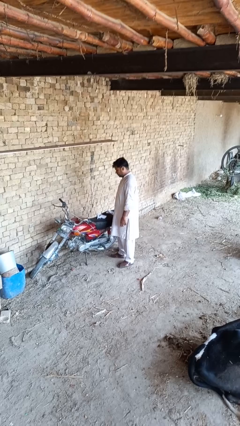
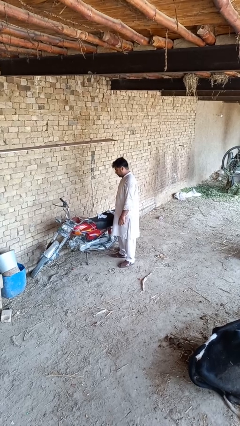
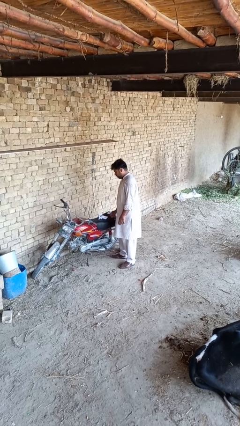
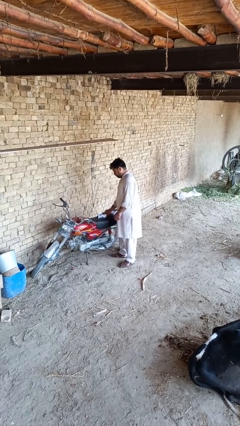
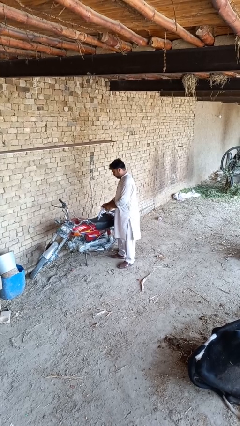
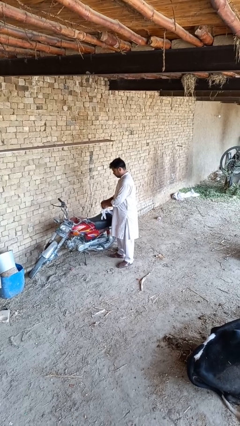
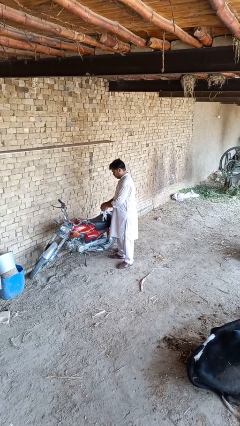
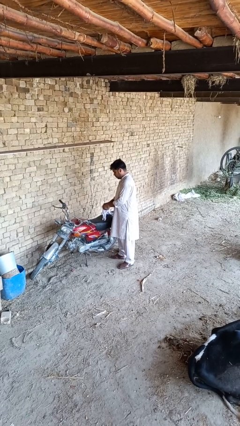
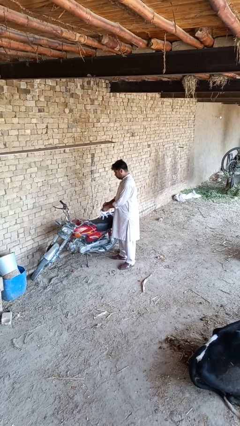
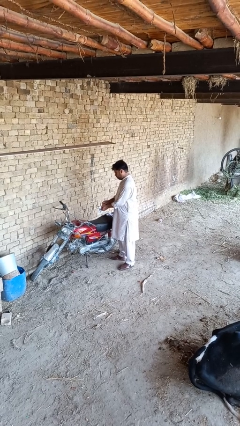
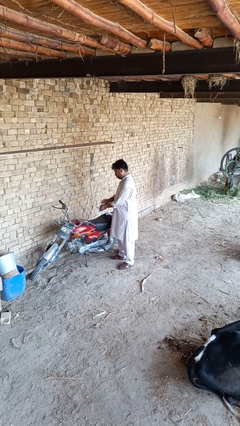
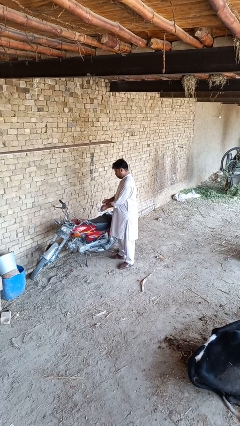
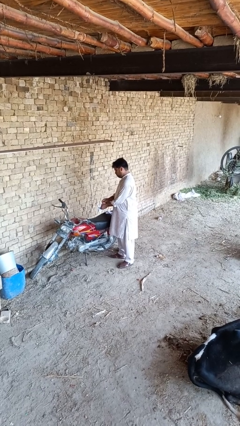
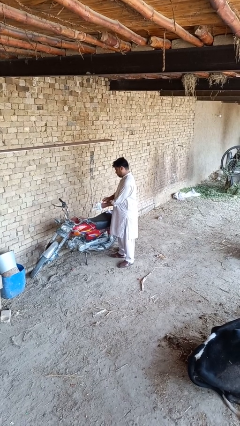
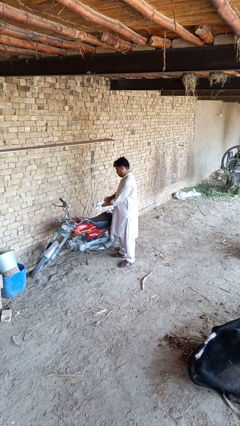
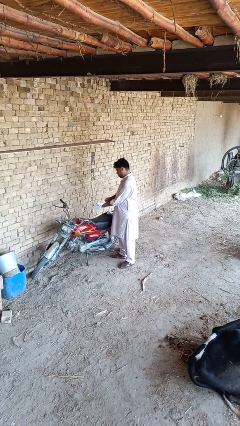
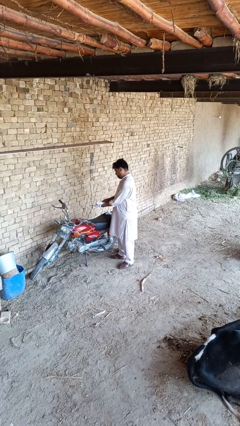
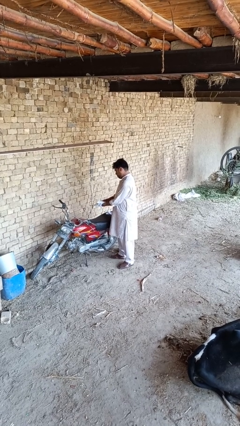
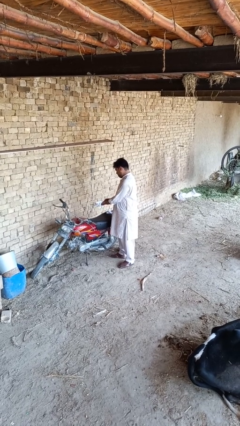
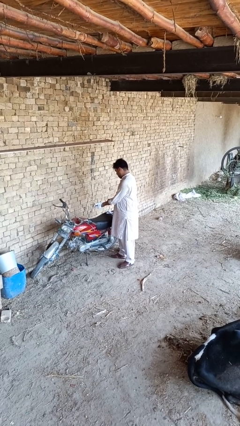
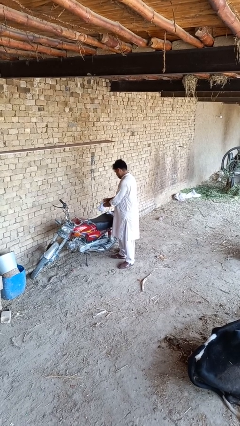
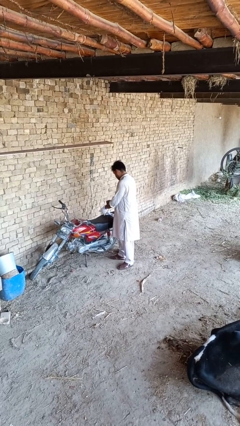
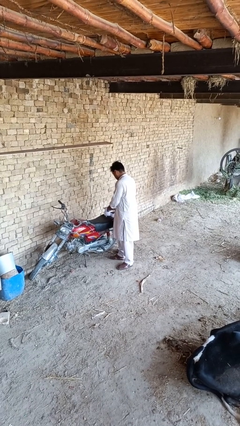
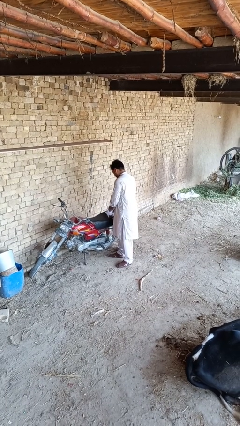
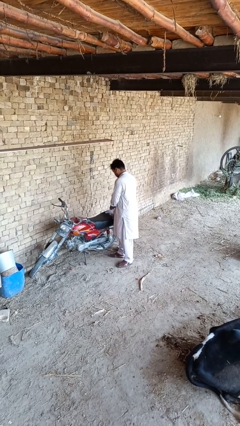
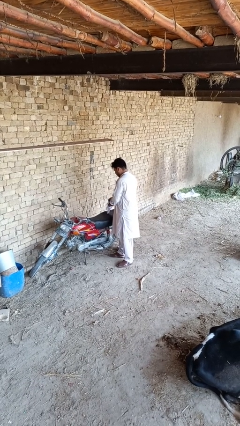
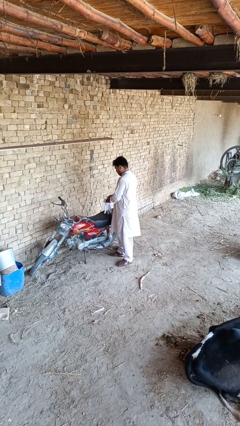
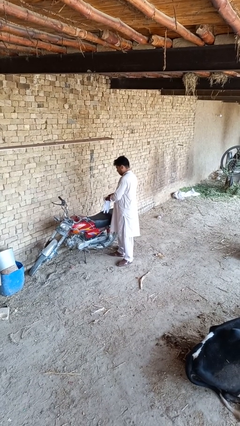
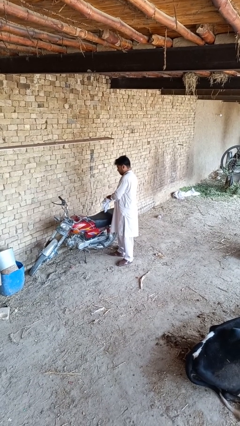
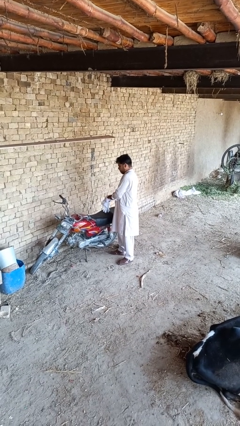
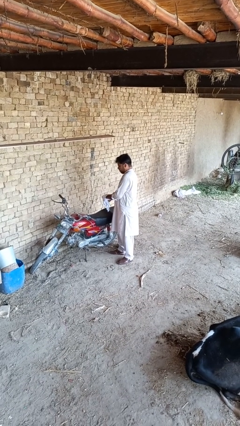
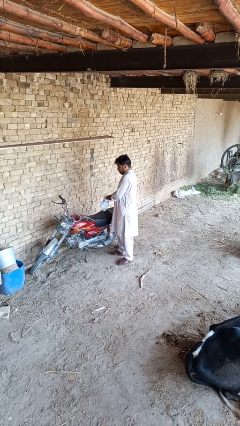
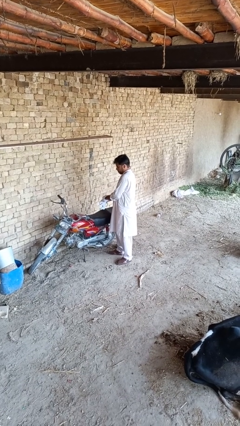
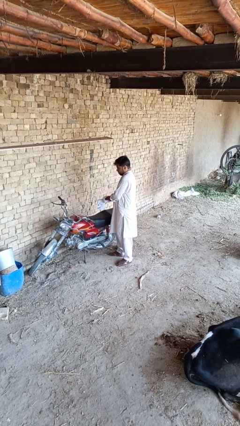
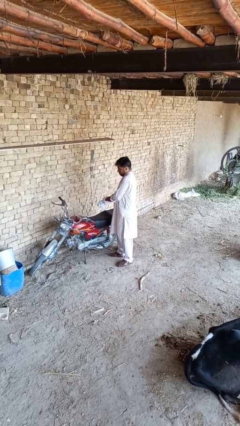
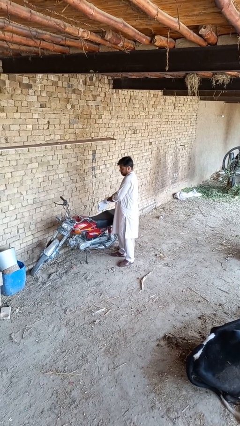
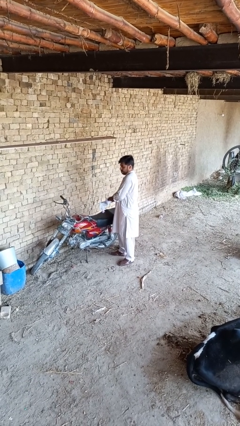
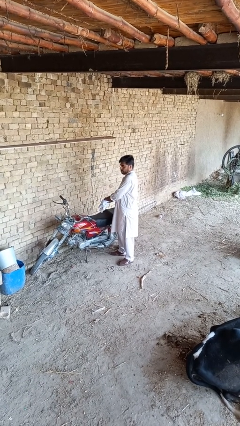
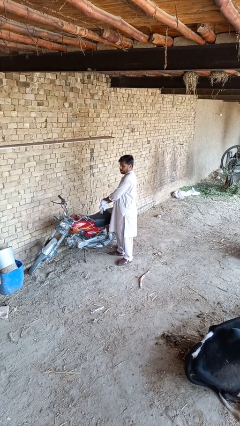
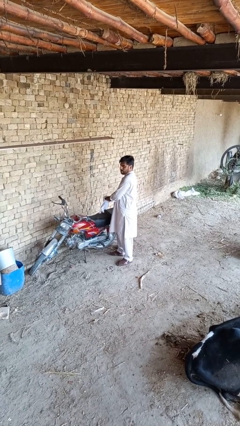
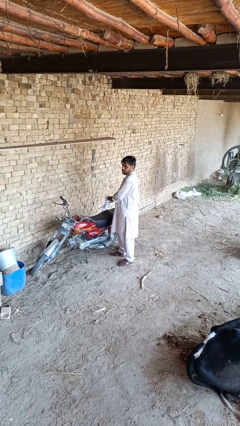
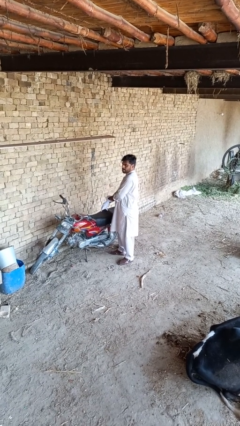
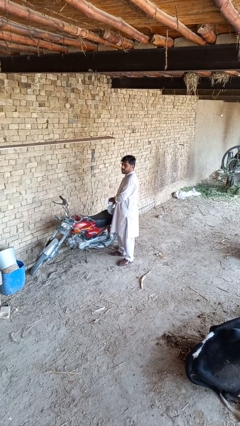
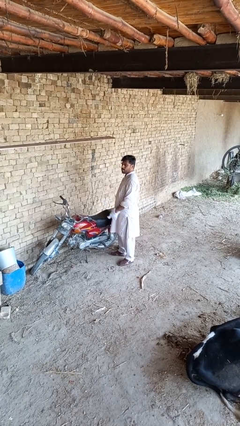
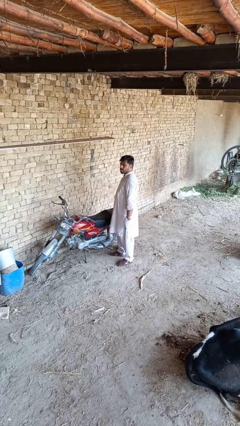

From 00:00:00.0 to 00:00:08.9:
person puts on gloves

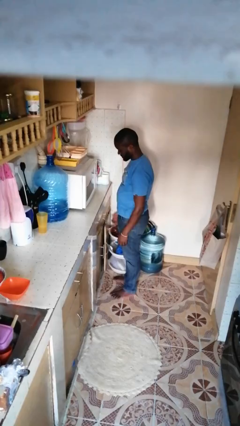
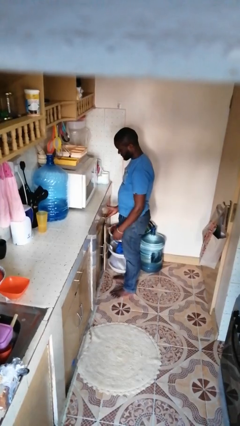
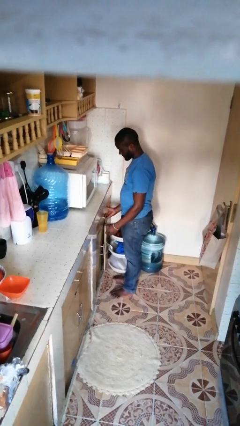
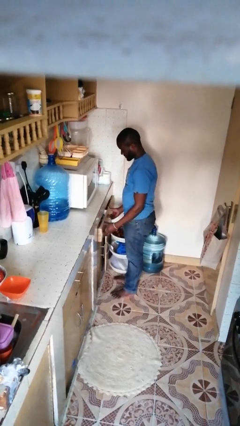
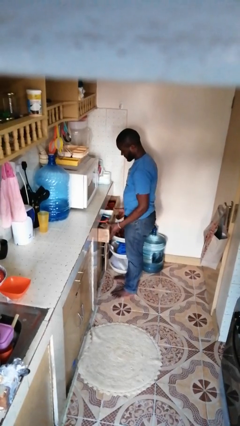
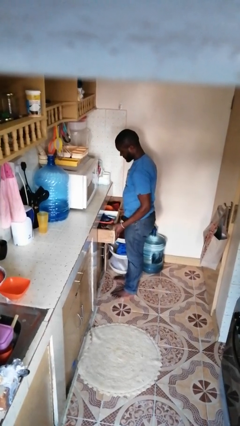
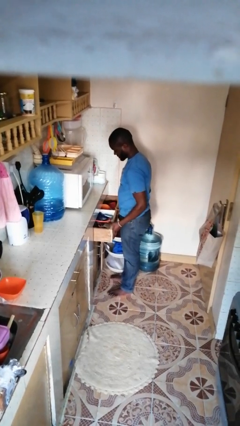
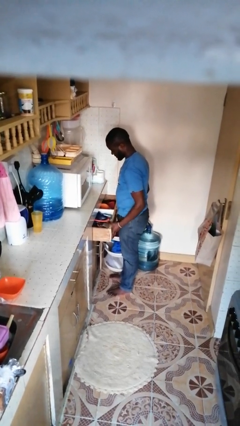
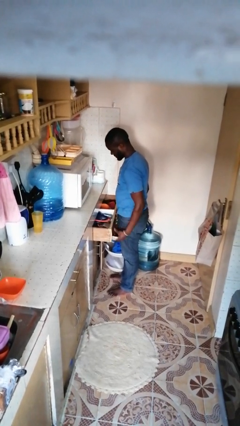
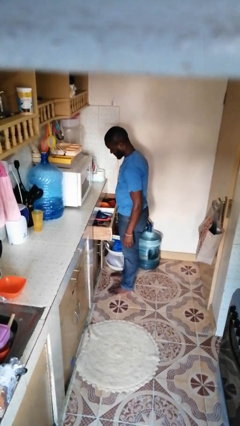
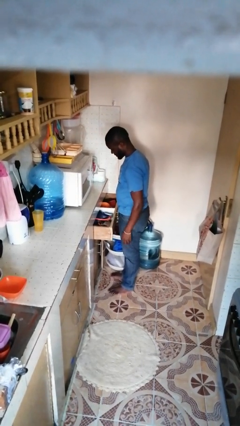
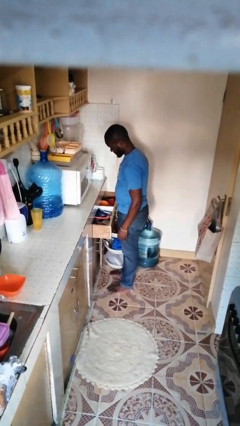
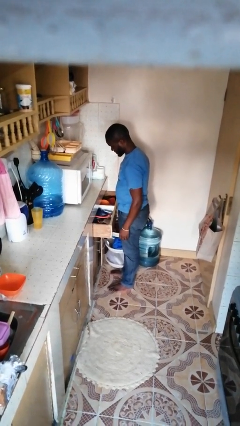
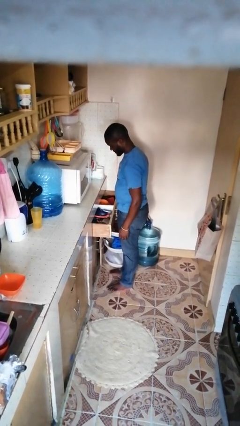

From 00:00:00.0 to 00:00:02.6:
person opens kitchen drawer

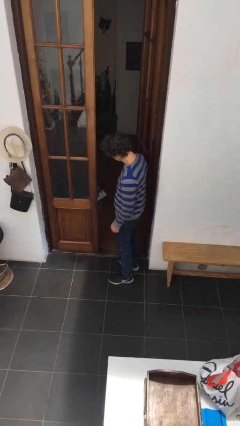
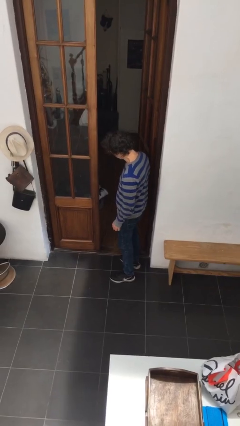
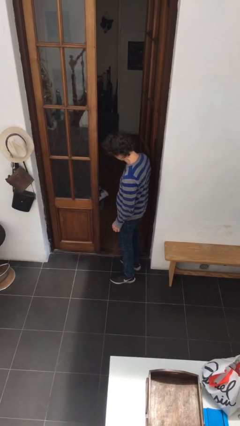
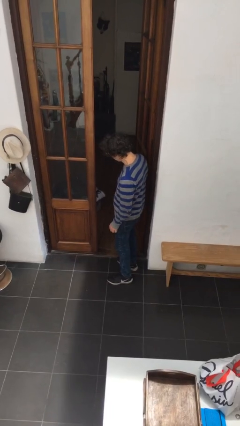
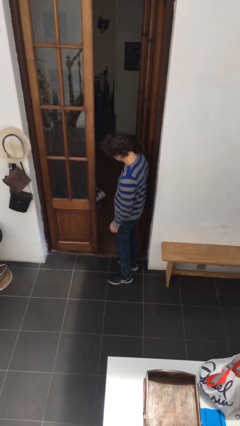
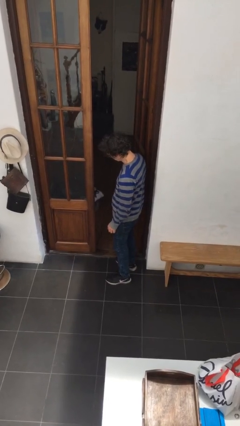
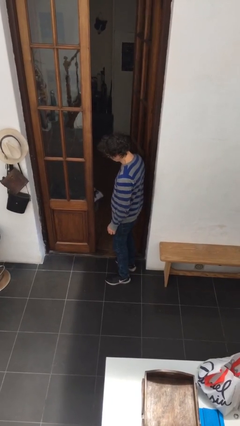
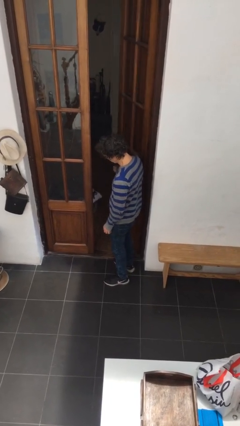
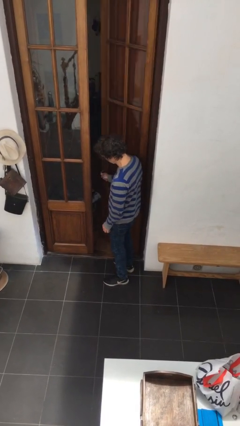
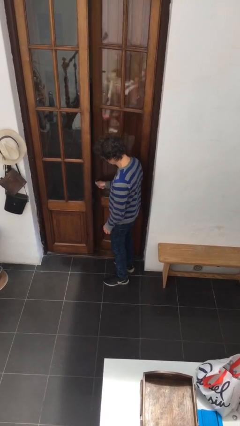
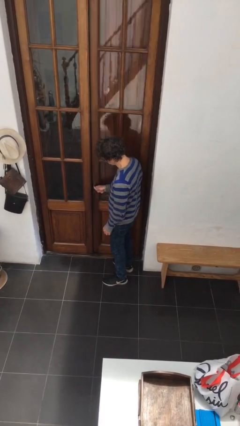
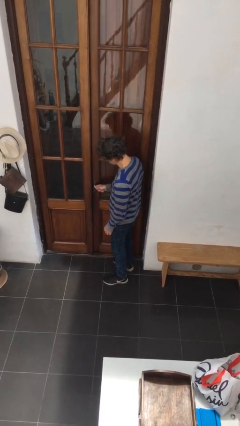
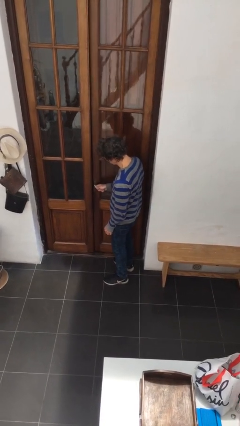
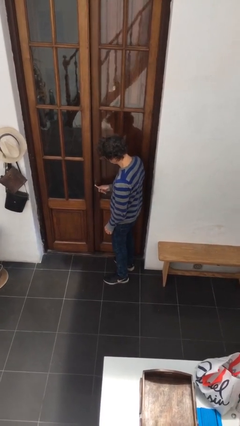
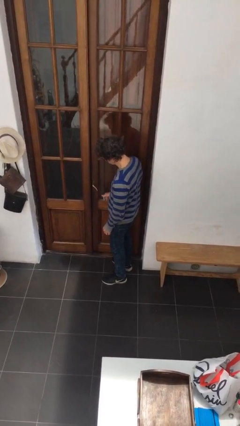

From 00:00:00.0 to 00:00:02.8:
person closes facility door

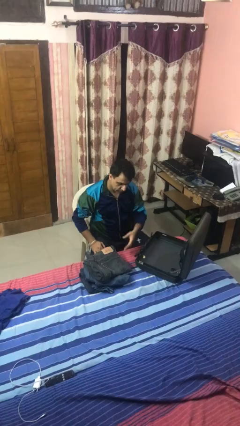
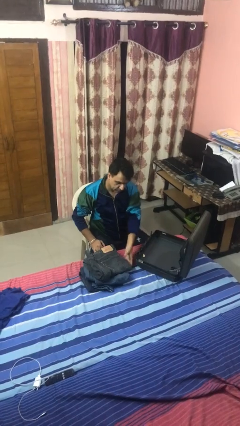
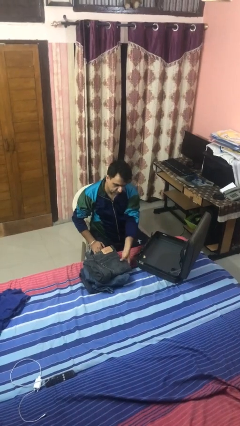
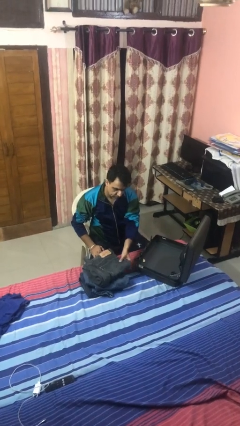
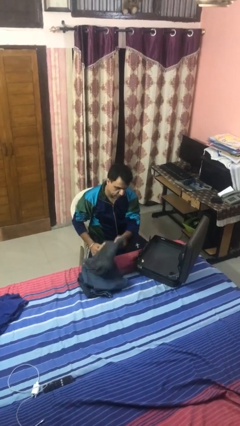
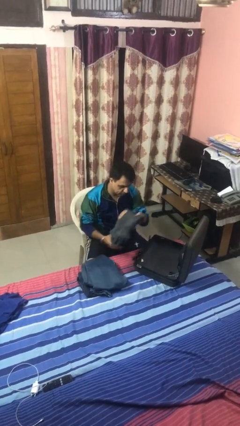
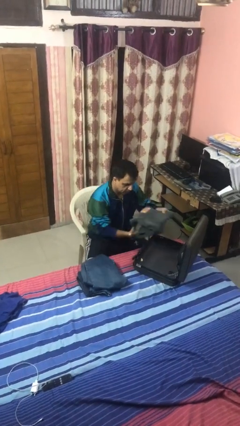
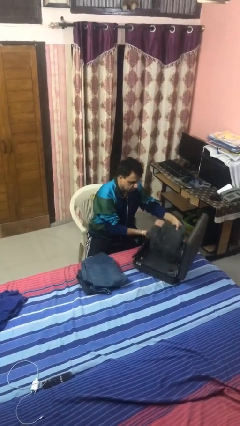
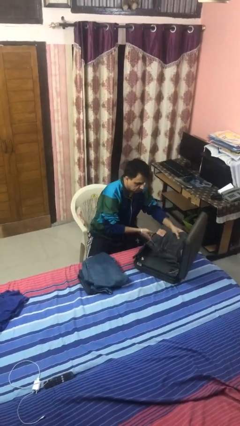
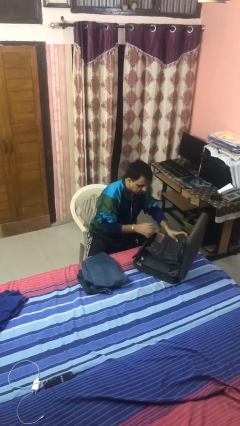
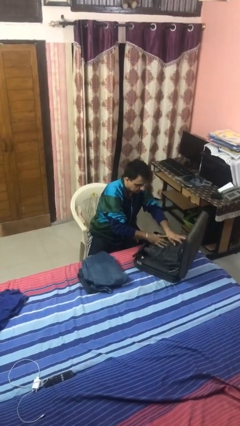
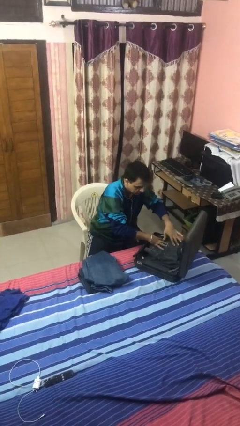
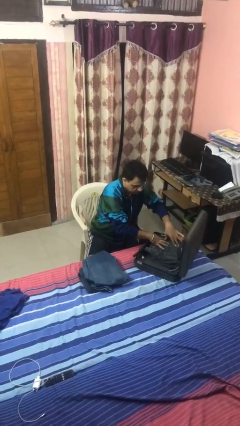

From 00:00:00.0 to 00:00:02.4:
person loads clothes into suitcase

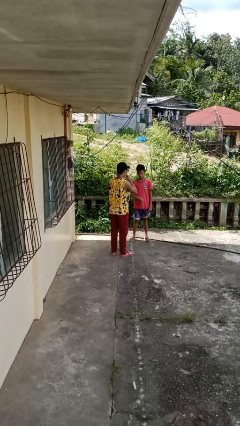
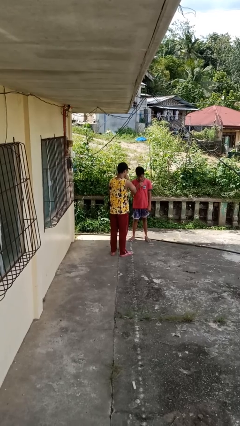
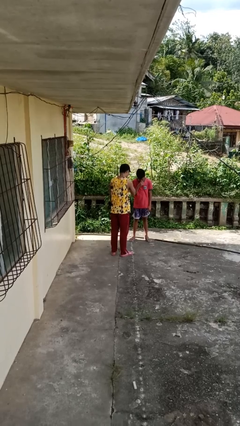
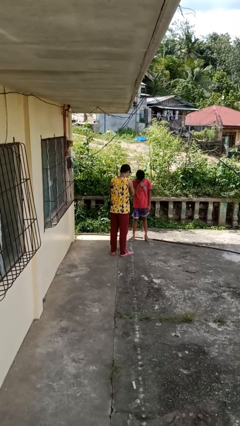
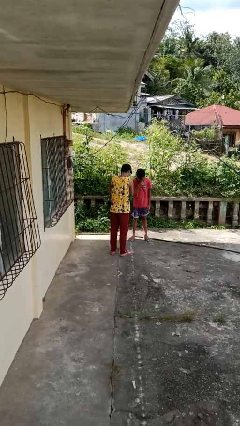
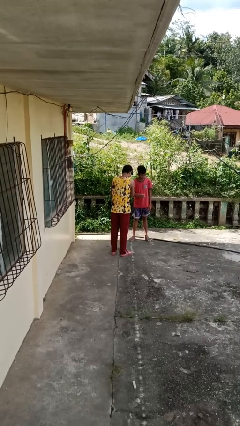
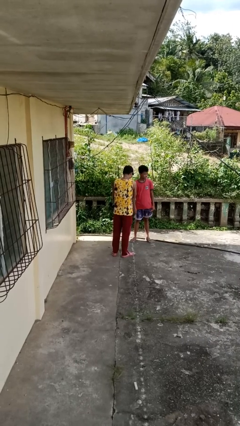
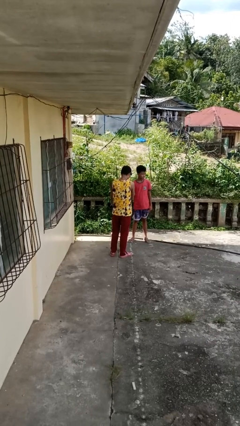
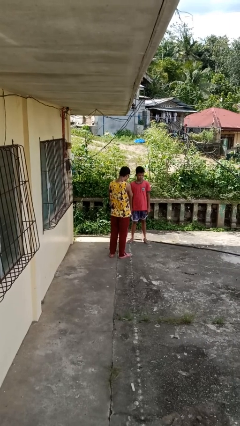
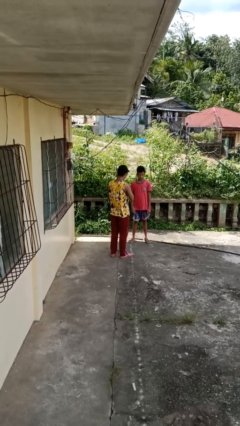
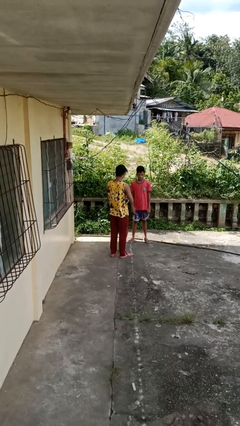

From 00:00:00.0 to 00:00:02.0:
person laughs with person
